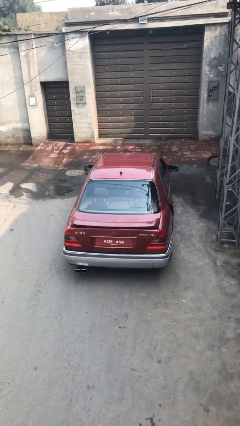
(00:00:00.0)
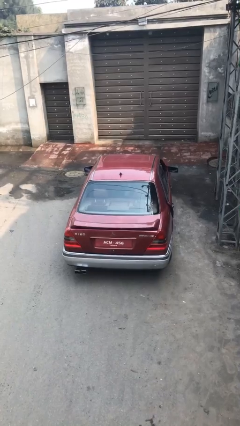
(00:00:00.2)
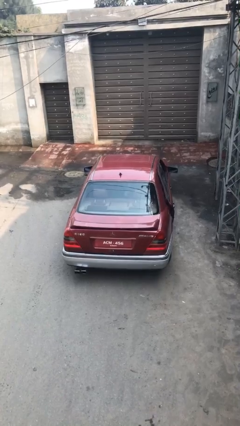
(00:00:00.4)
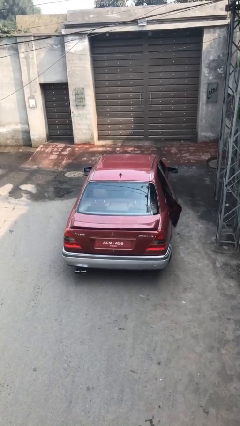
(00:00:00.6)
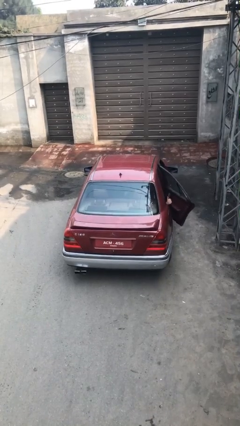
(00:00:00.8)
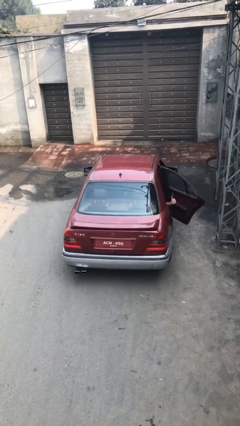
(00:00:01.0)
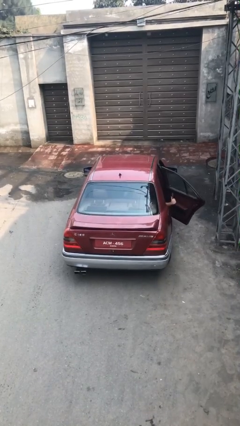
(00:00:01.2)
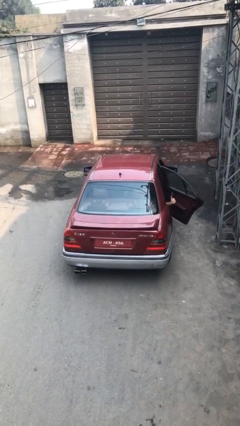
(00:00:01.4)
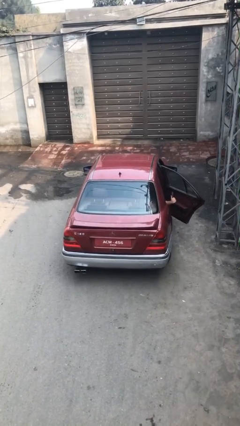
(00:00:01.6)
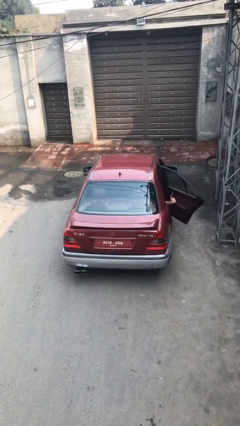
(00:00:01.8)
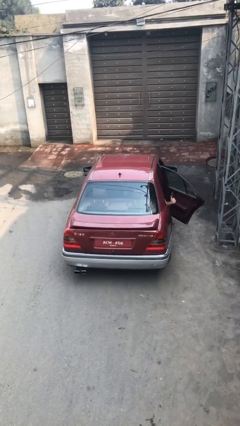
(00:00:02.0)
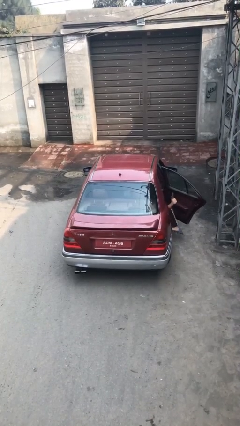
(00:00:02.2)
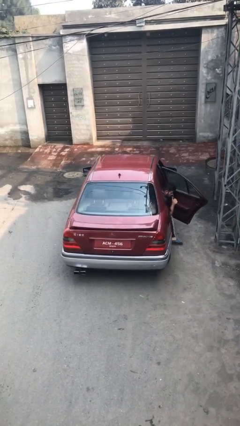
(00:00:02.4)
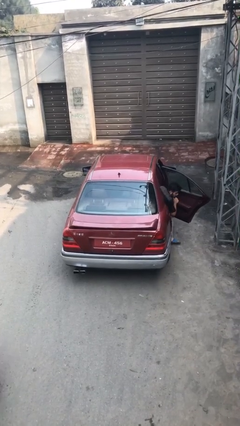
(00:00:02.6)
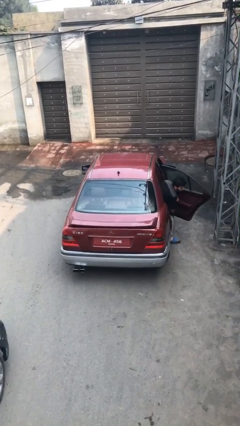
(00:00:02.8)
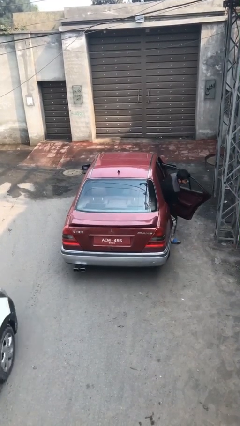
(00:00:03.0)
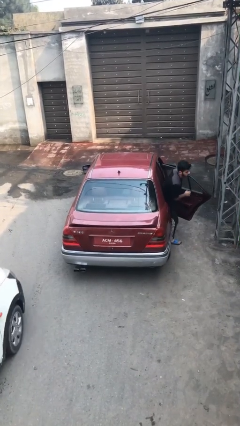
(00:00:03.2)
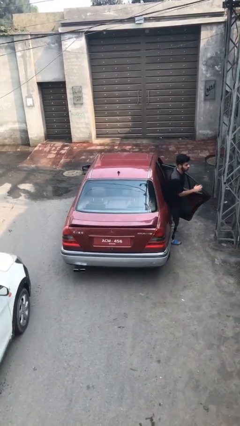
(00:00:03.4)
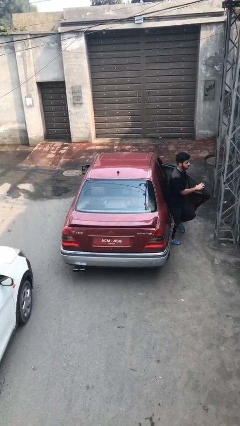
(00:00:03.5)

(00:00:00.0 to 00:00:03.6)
car drops off person

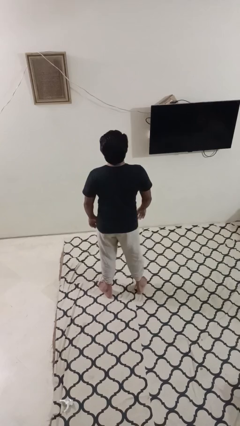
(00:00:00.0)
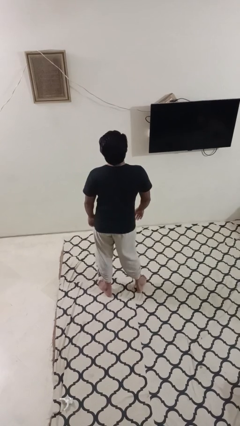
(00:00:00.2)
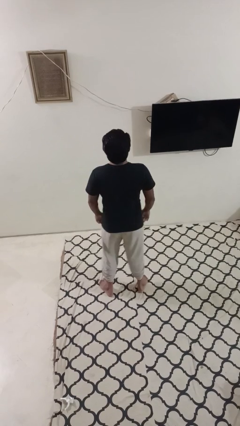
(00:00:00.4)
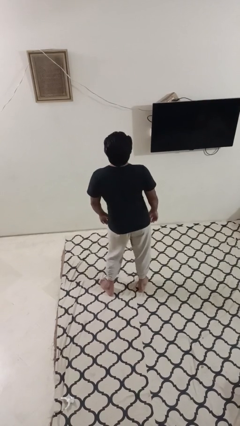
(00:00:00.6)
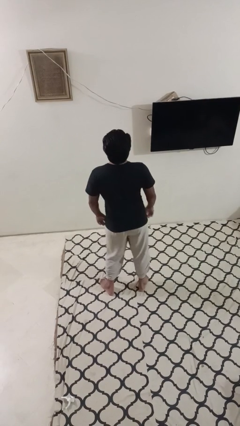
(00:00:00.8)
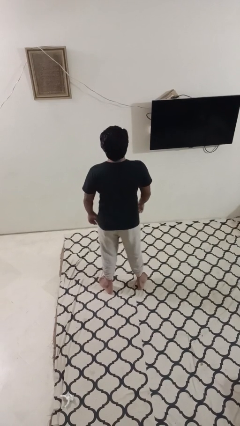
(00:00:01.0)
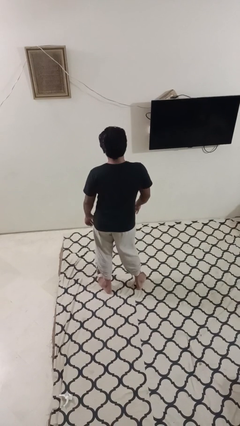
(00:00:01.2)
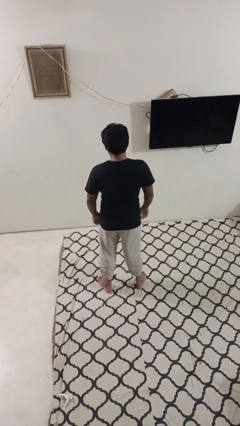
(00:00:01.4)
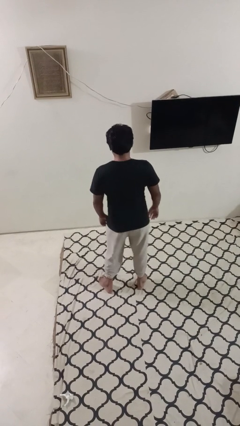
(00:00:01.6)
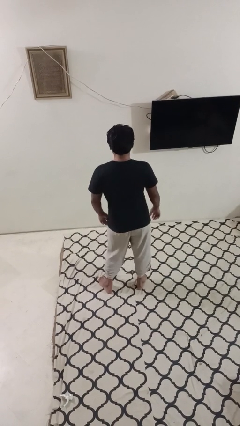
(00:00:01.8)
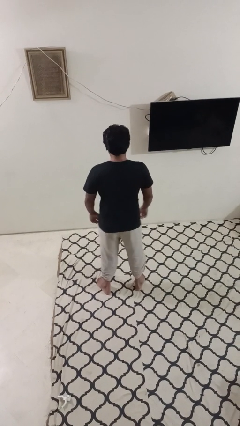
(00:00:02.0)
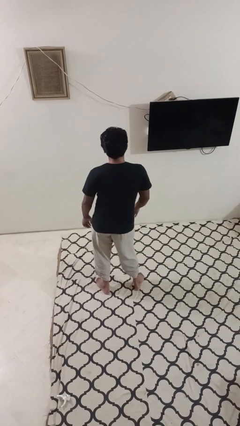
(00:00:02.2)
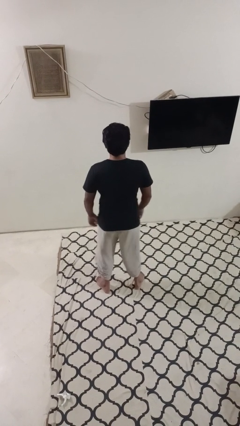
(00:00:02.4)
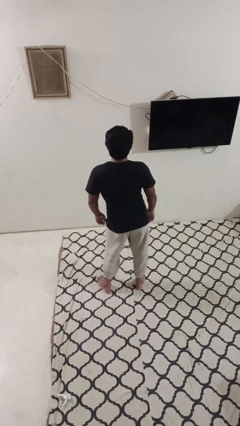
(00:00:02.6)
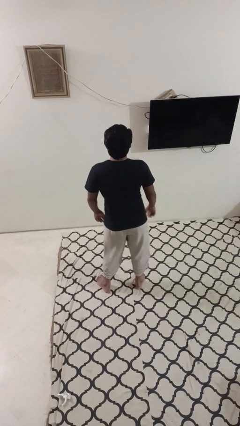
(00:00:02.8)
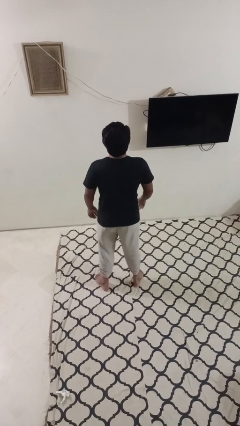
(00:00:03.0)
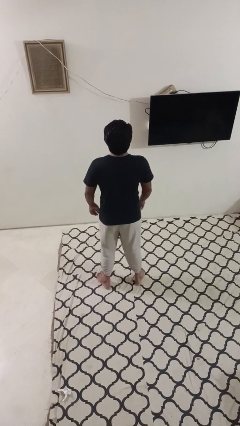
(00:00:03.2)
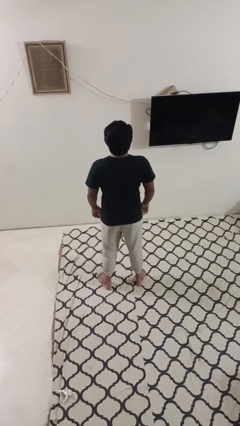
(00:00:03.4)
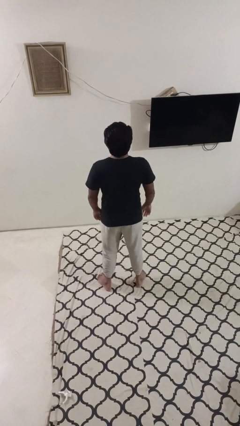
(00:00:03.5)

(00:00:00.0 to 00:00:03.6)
person wiggles hips

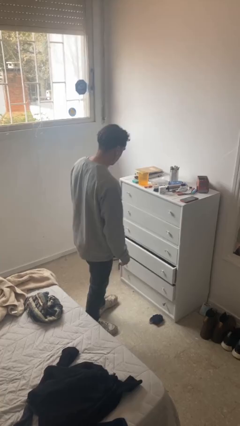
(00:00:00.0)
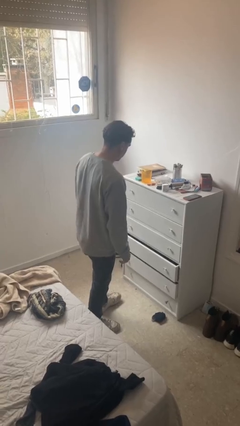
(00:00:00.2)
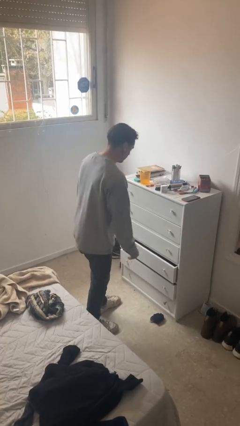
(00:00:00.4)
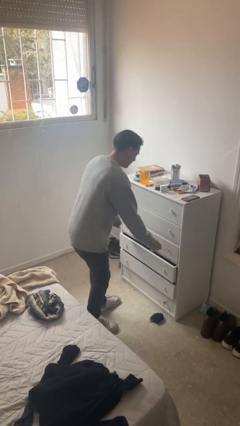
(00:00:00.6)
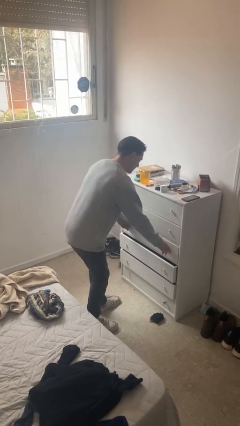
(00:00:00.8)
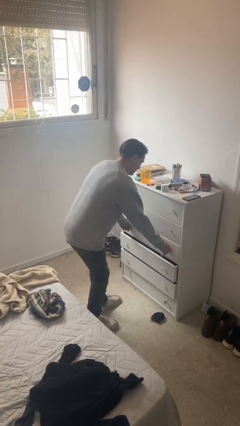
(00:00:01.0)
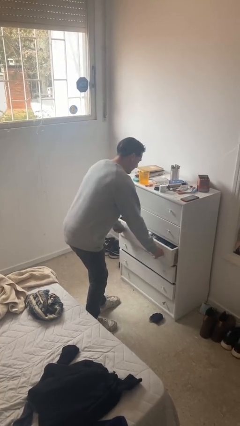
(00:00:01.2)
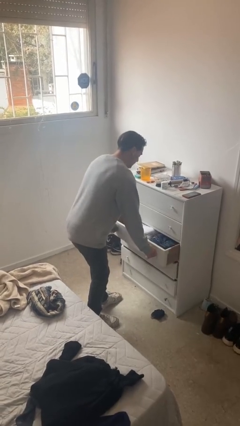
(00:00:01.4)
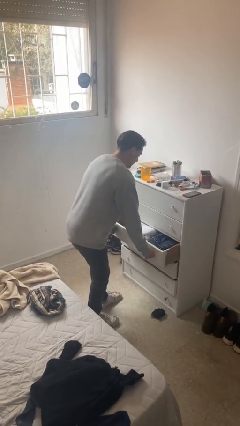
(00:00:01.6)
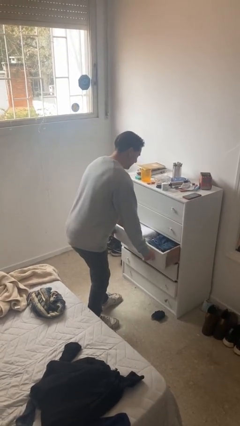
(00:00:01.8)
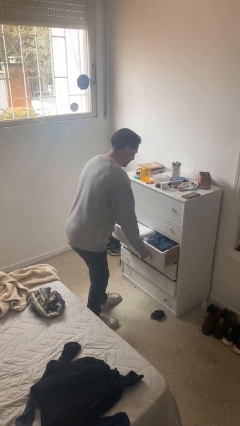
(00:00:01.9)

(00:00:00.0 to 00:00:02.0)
person opens dresser drawer

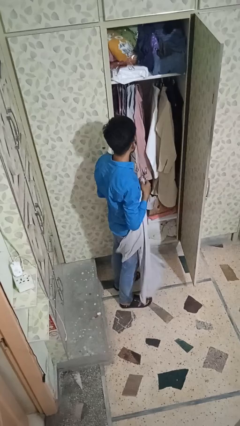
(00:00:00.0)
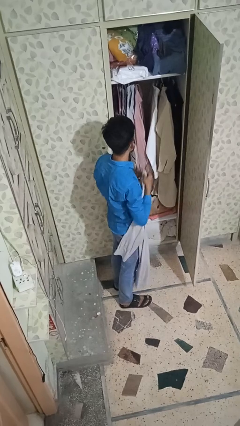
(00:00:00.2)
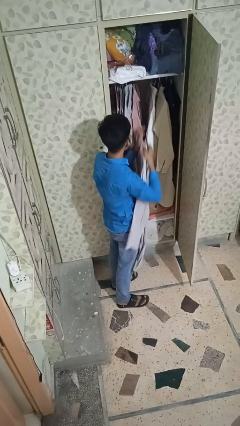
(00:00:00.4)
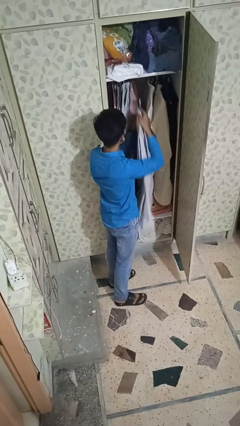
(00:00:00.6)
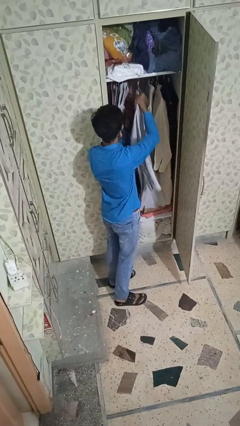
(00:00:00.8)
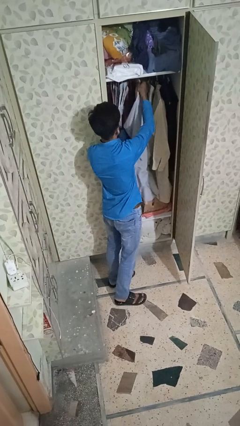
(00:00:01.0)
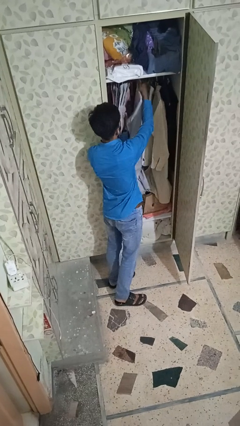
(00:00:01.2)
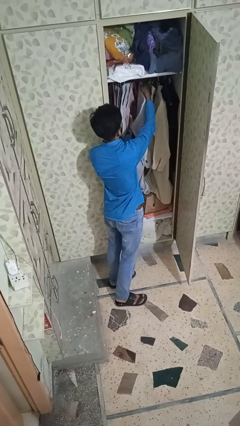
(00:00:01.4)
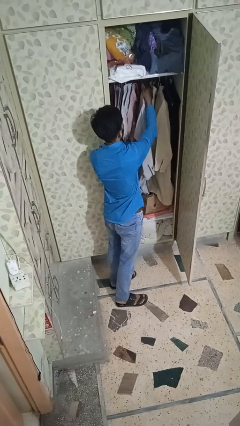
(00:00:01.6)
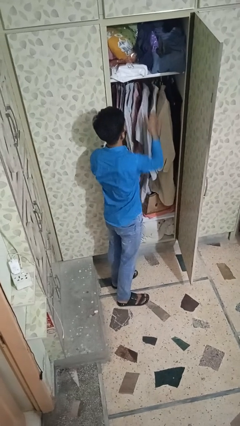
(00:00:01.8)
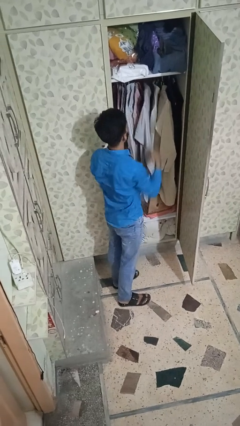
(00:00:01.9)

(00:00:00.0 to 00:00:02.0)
person puts clothes into closet

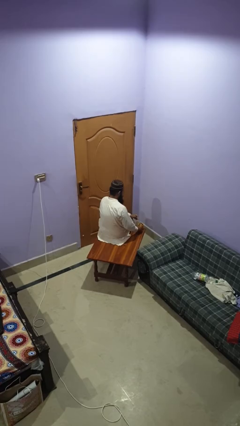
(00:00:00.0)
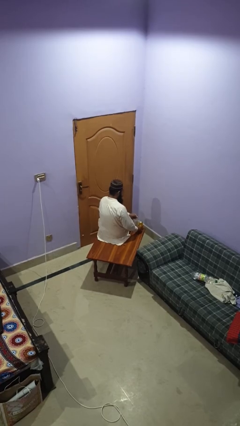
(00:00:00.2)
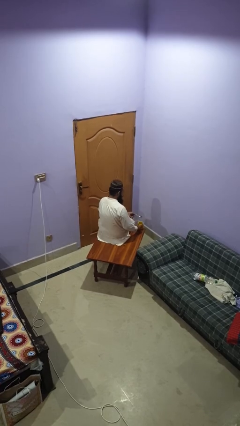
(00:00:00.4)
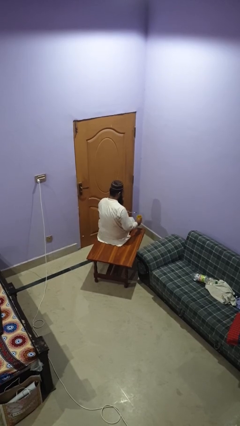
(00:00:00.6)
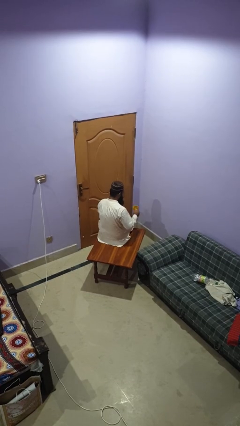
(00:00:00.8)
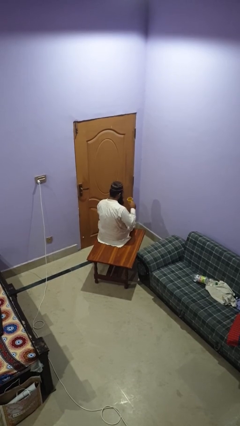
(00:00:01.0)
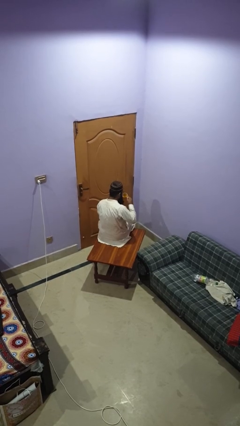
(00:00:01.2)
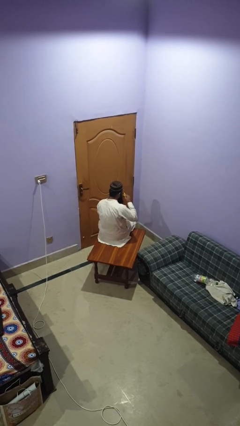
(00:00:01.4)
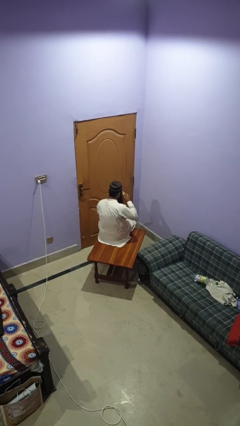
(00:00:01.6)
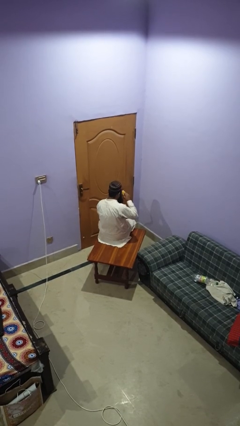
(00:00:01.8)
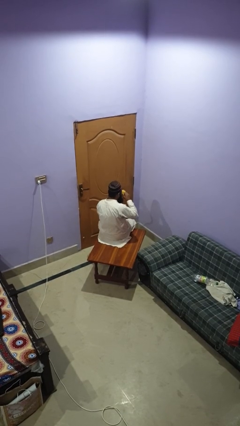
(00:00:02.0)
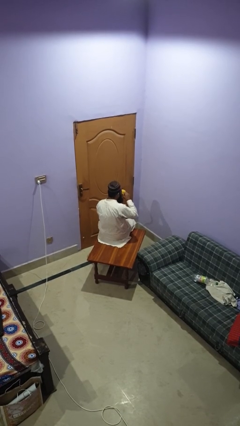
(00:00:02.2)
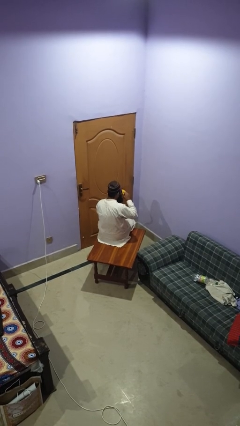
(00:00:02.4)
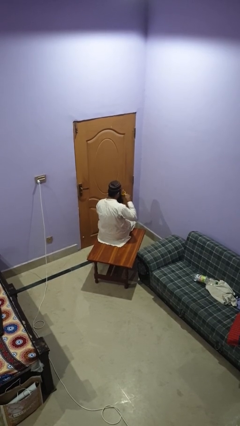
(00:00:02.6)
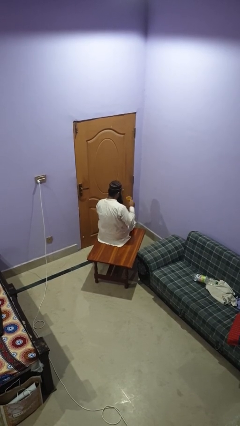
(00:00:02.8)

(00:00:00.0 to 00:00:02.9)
person drinks from mug

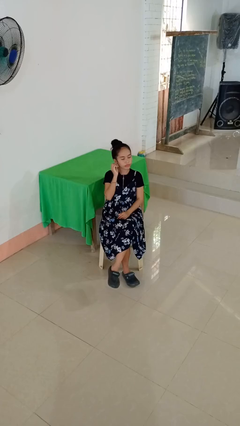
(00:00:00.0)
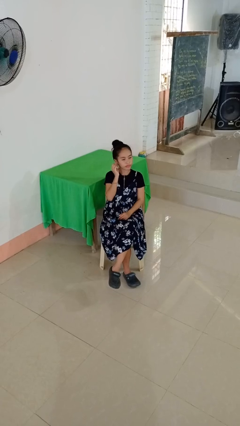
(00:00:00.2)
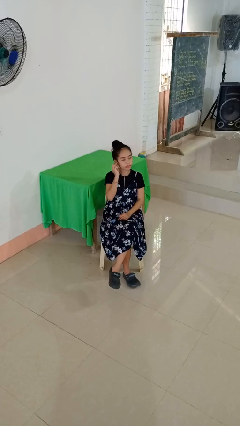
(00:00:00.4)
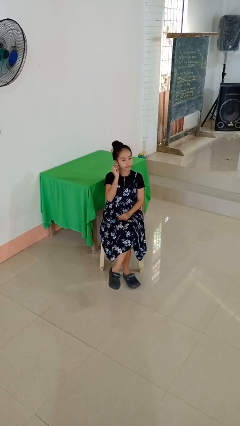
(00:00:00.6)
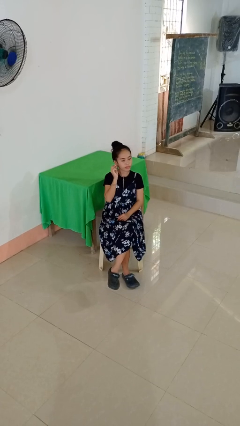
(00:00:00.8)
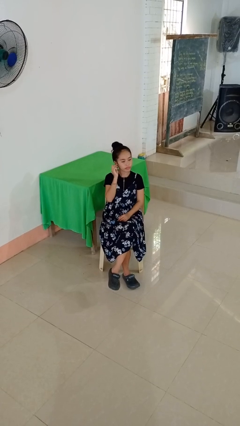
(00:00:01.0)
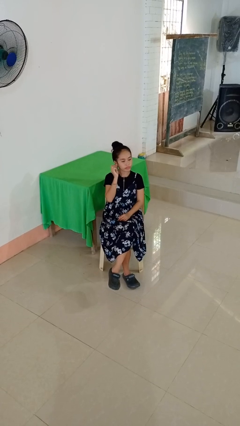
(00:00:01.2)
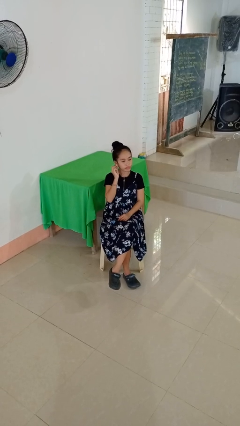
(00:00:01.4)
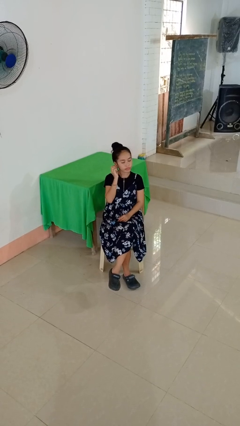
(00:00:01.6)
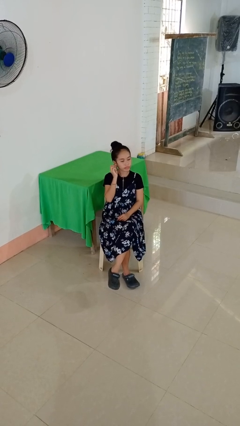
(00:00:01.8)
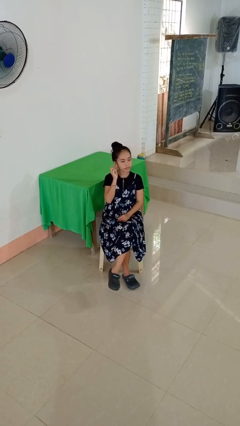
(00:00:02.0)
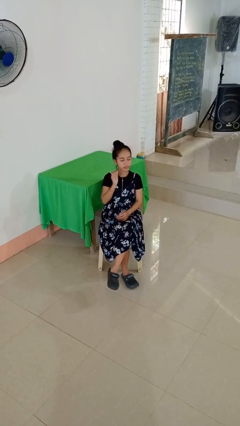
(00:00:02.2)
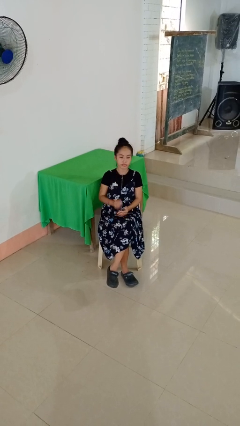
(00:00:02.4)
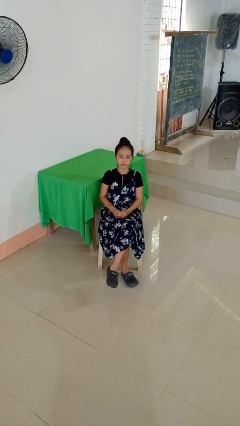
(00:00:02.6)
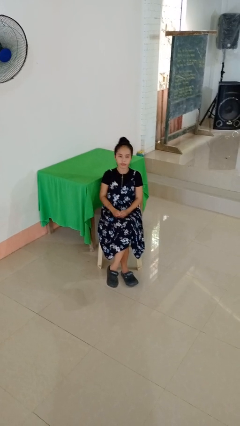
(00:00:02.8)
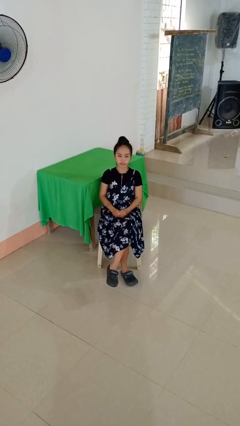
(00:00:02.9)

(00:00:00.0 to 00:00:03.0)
person touches earlobe
